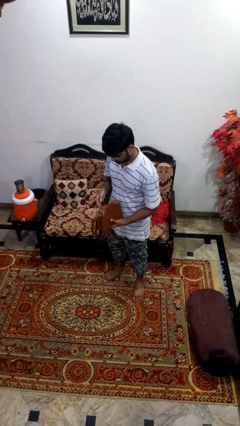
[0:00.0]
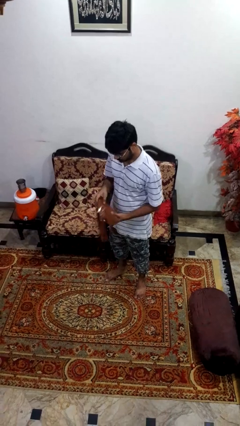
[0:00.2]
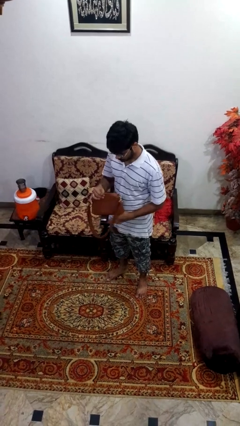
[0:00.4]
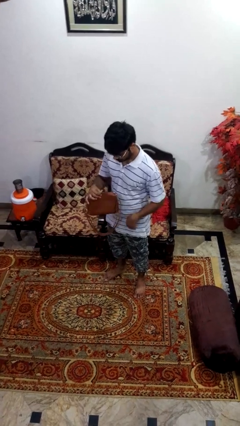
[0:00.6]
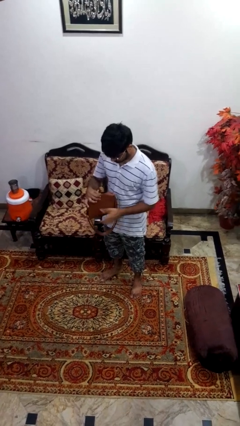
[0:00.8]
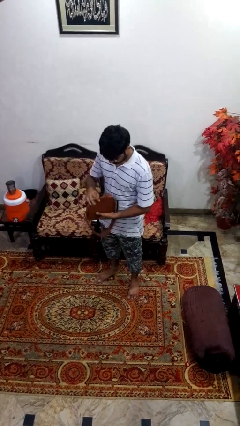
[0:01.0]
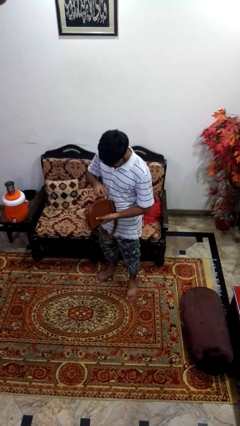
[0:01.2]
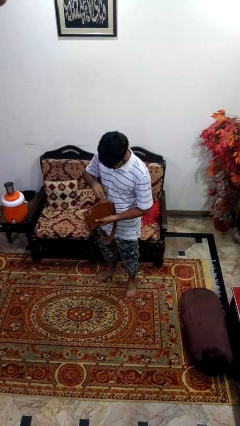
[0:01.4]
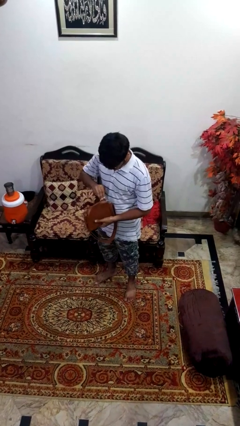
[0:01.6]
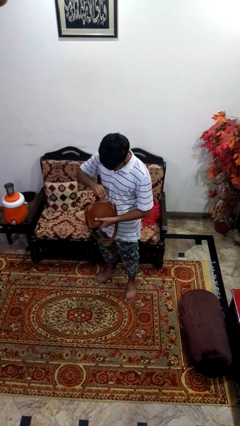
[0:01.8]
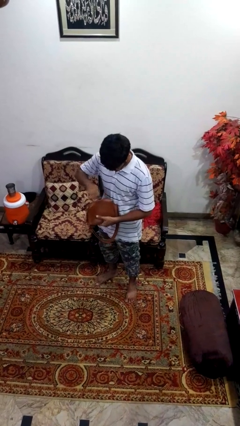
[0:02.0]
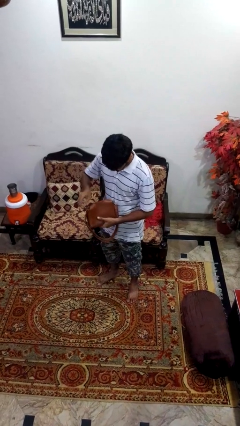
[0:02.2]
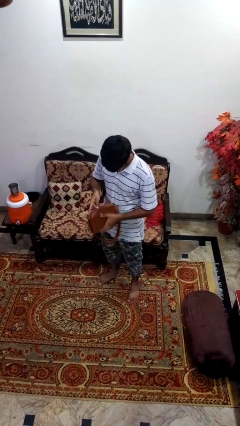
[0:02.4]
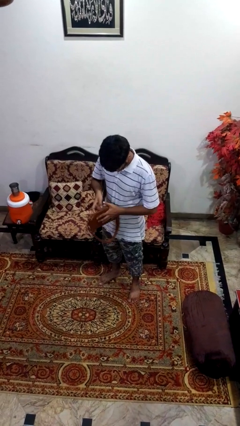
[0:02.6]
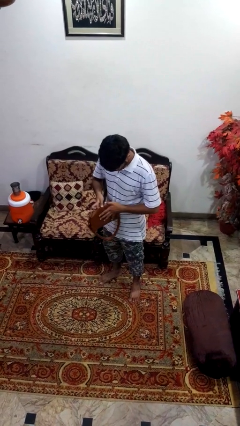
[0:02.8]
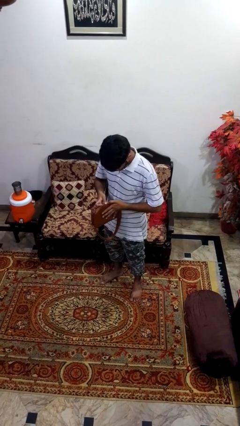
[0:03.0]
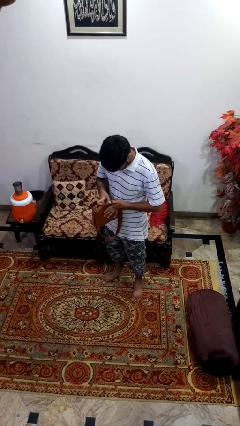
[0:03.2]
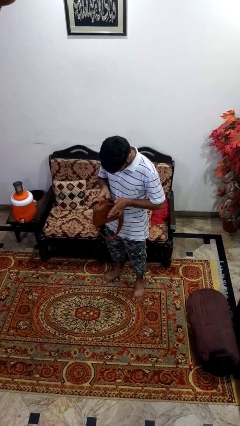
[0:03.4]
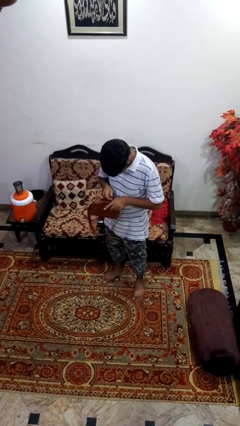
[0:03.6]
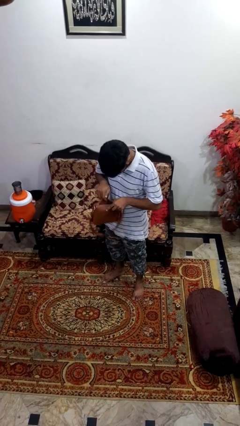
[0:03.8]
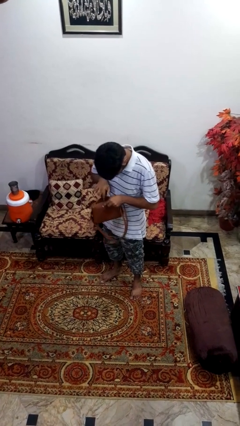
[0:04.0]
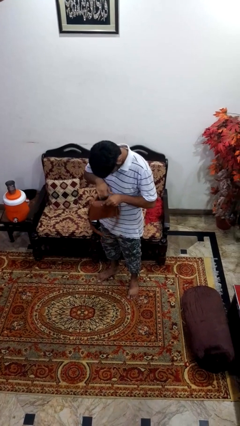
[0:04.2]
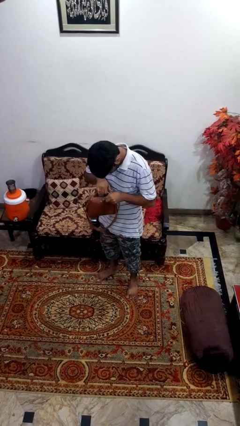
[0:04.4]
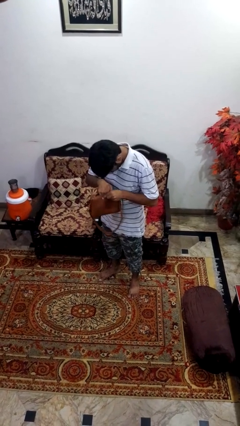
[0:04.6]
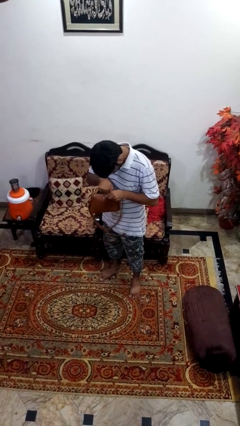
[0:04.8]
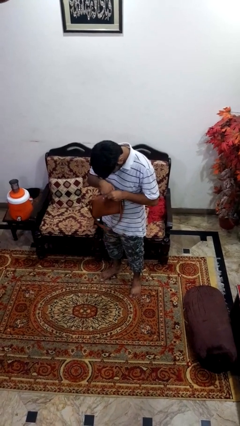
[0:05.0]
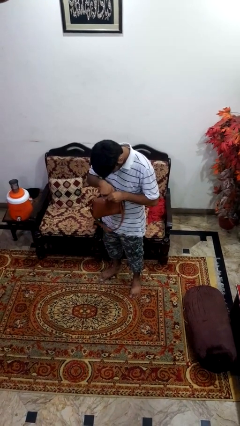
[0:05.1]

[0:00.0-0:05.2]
person searches in purse

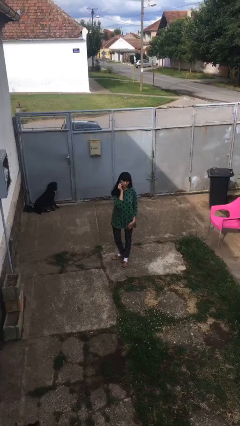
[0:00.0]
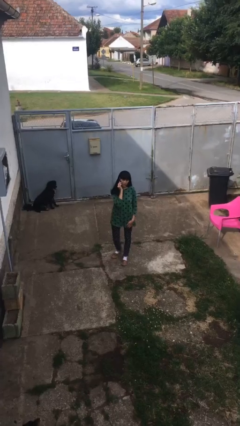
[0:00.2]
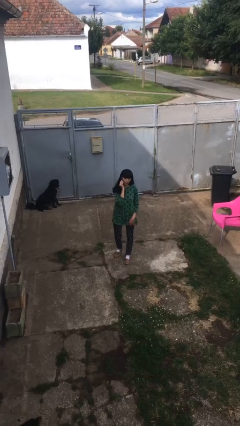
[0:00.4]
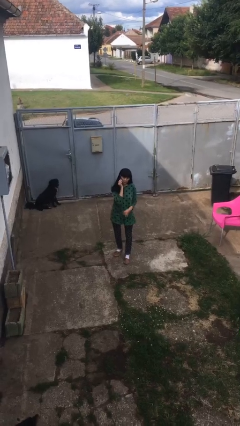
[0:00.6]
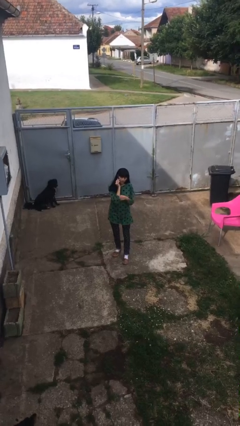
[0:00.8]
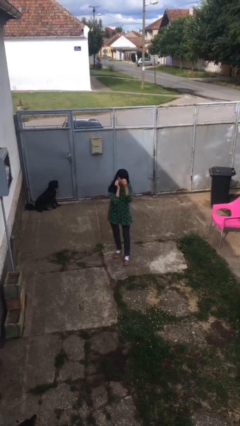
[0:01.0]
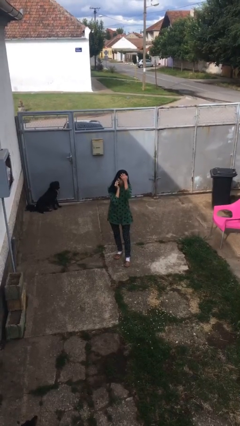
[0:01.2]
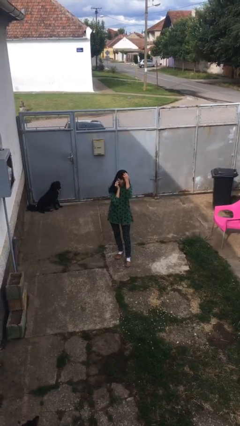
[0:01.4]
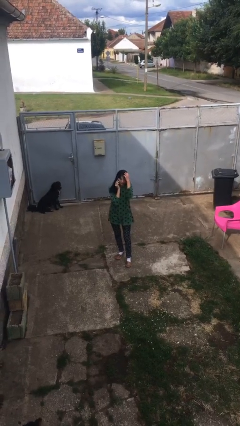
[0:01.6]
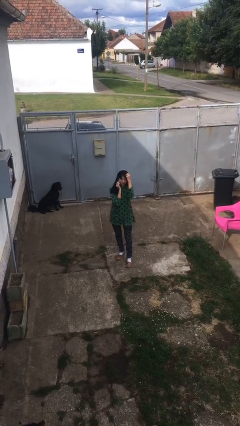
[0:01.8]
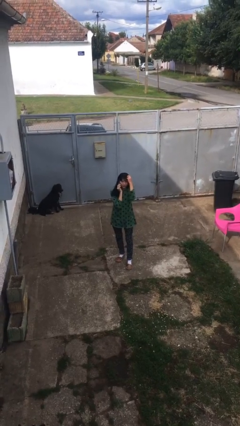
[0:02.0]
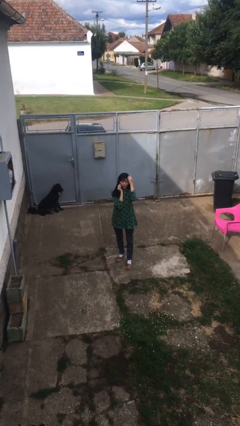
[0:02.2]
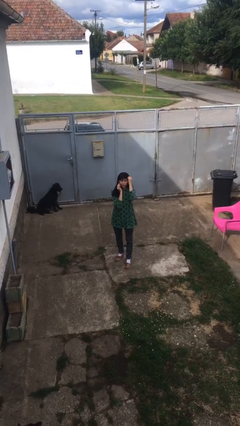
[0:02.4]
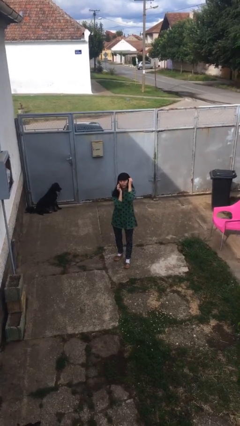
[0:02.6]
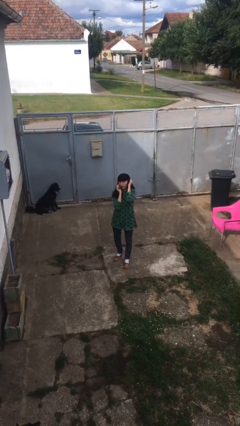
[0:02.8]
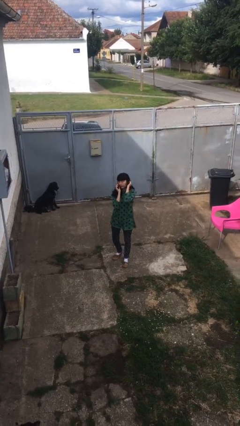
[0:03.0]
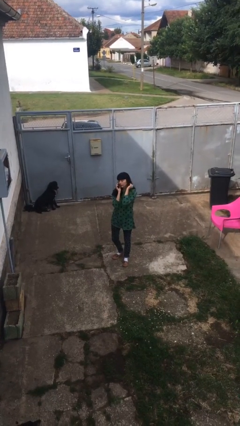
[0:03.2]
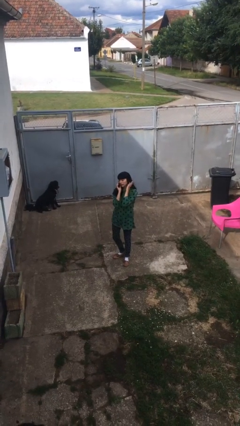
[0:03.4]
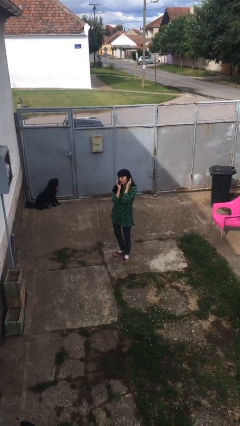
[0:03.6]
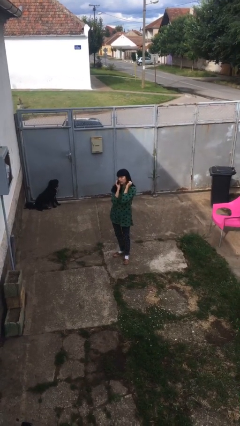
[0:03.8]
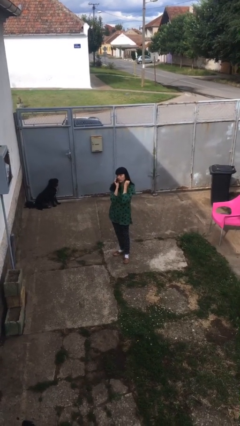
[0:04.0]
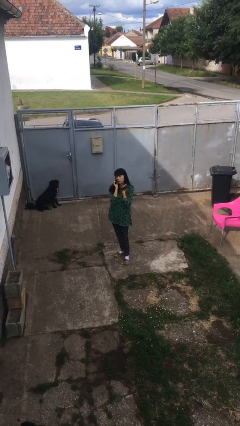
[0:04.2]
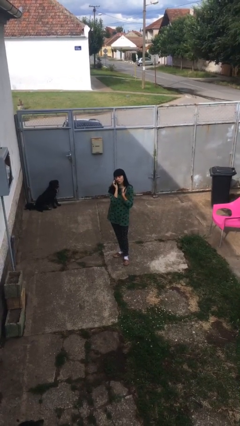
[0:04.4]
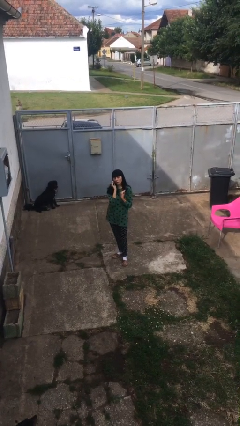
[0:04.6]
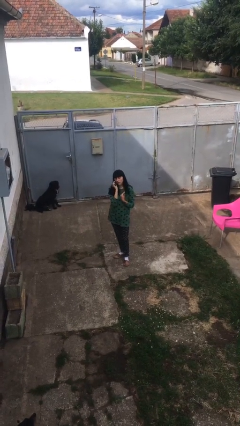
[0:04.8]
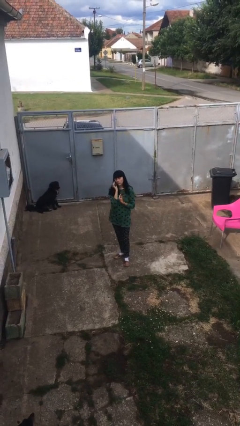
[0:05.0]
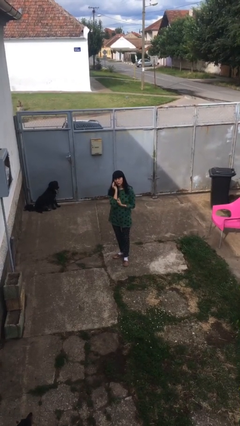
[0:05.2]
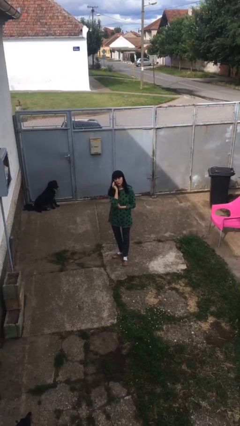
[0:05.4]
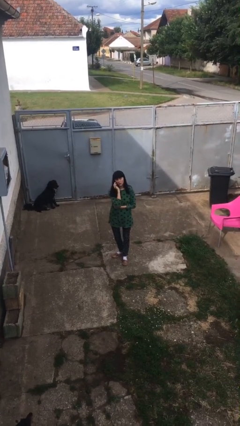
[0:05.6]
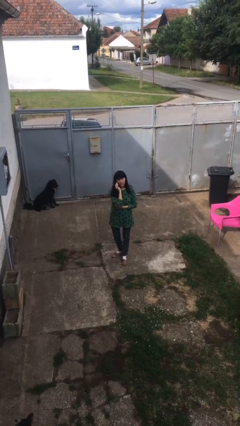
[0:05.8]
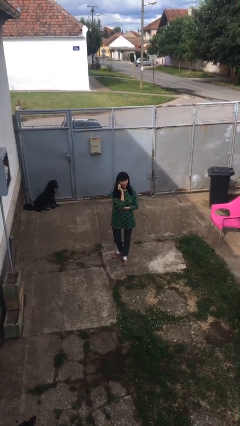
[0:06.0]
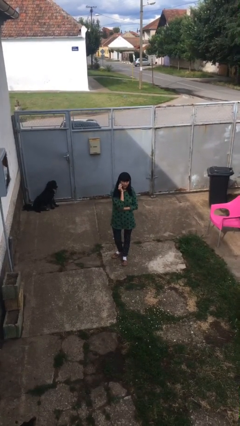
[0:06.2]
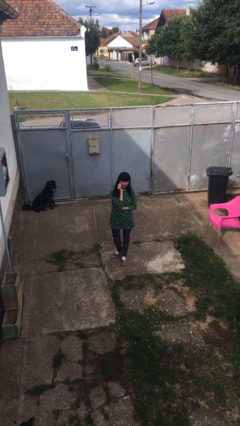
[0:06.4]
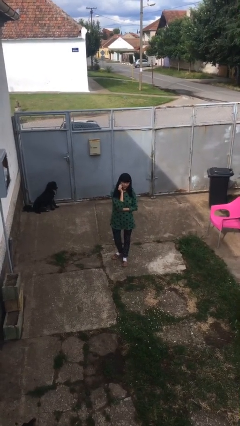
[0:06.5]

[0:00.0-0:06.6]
person talks on phone

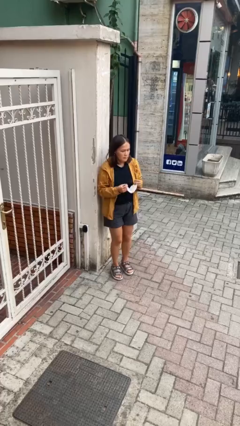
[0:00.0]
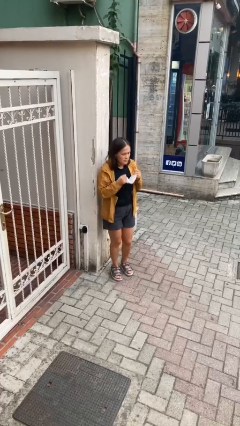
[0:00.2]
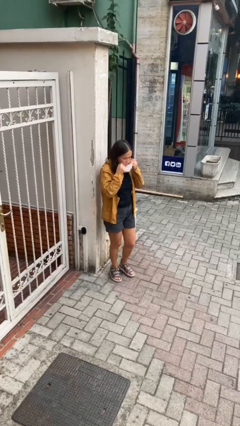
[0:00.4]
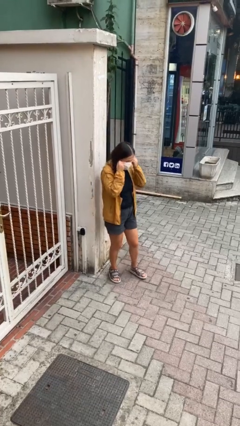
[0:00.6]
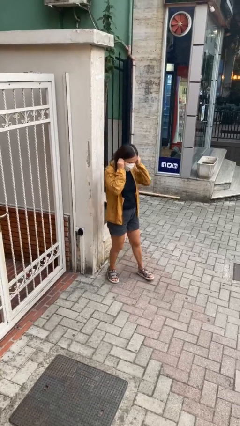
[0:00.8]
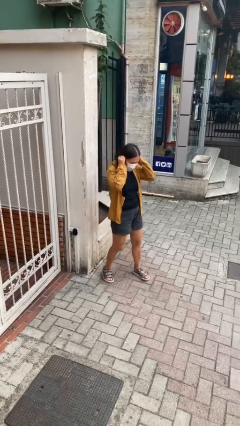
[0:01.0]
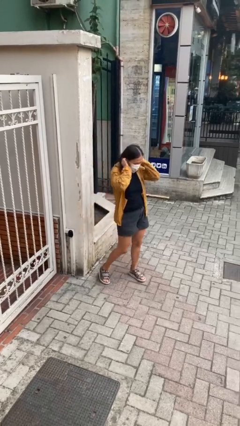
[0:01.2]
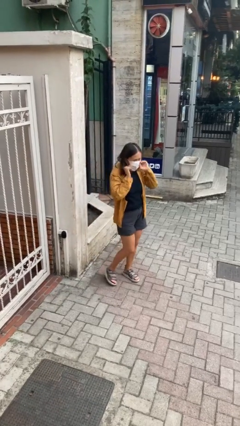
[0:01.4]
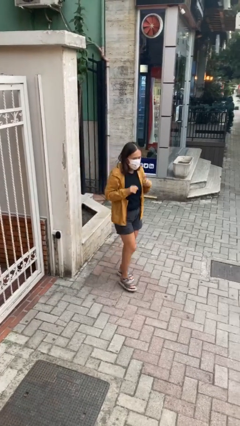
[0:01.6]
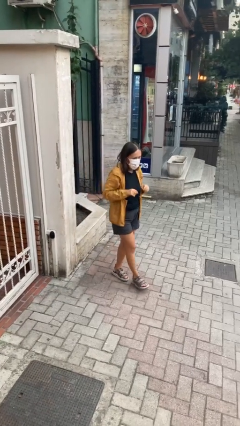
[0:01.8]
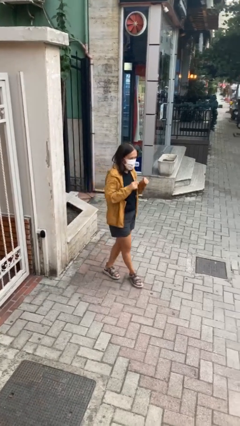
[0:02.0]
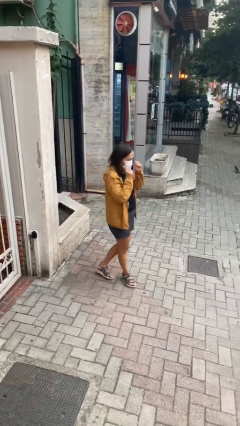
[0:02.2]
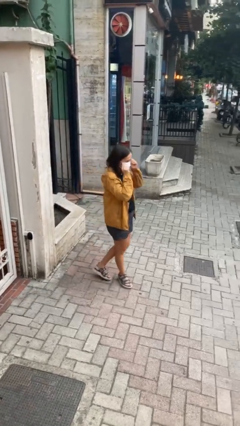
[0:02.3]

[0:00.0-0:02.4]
person puts on facemask

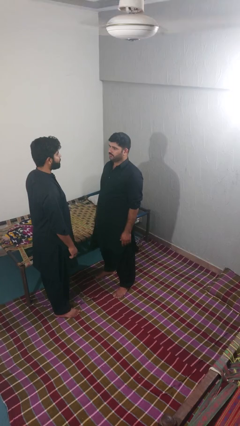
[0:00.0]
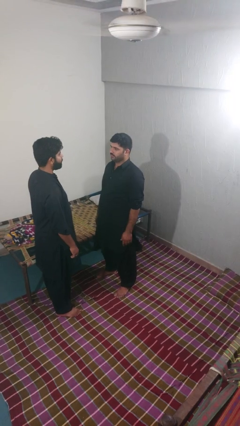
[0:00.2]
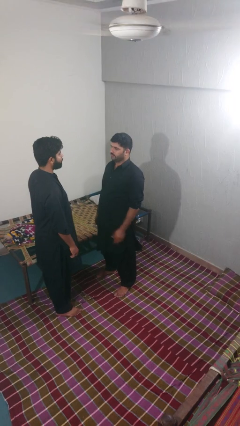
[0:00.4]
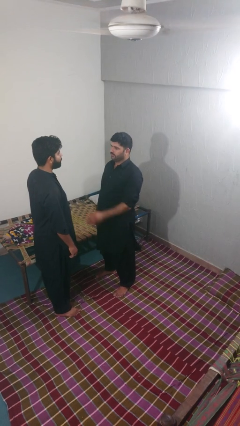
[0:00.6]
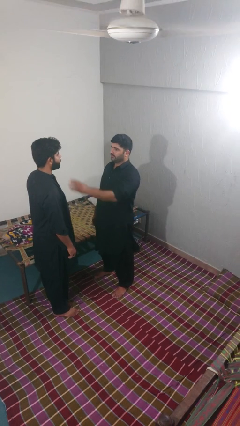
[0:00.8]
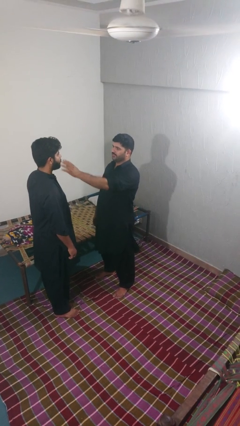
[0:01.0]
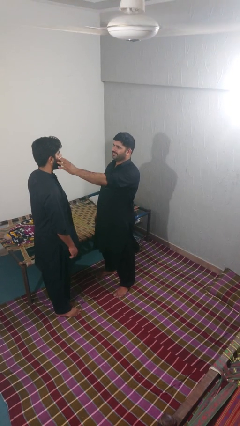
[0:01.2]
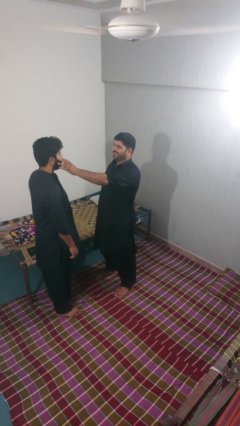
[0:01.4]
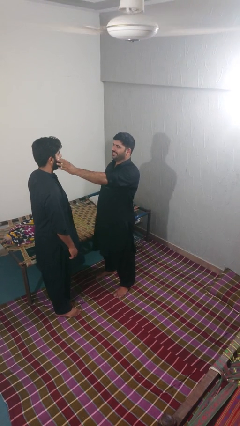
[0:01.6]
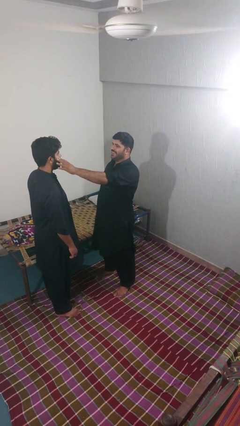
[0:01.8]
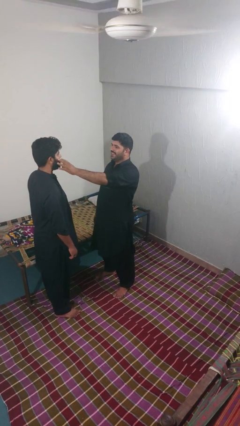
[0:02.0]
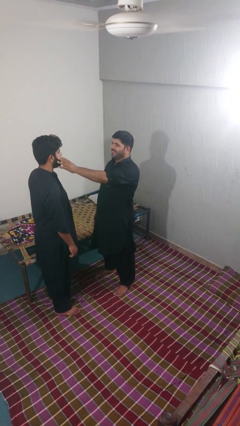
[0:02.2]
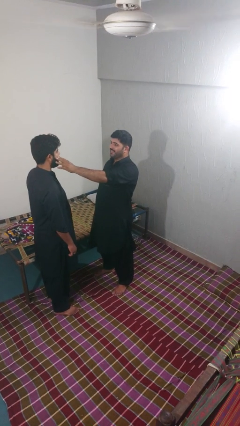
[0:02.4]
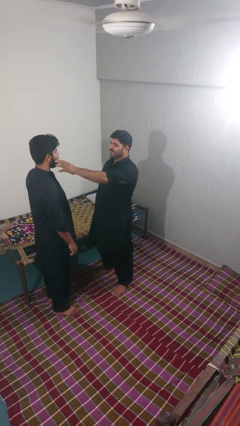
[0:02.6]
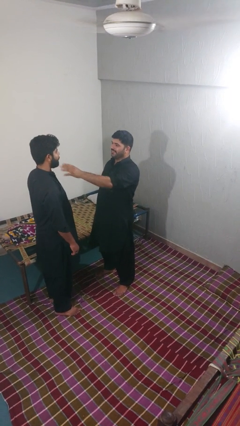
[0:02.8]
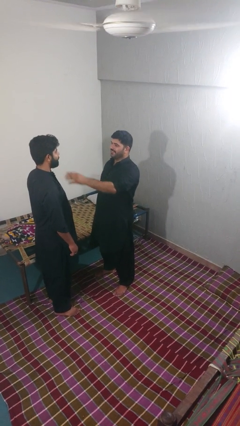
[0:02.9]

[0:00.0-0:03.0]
person touches face of person

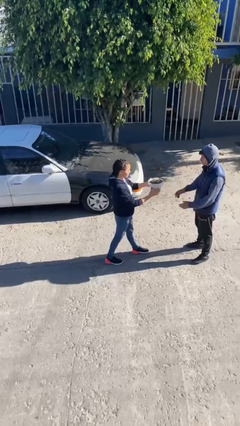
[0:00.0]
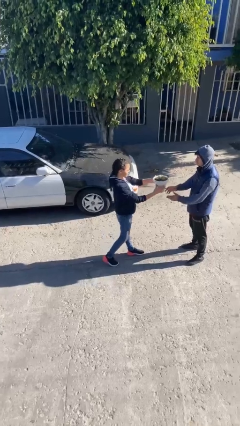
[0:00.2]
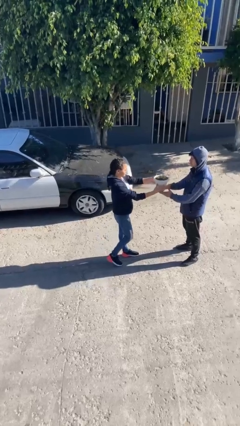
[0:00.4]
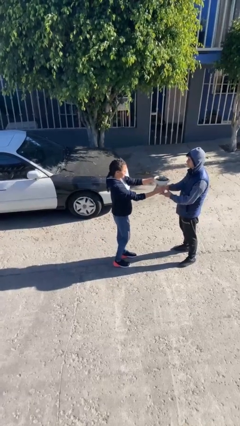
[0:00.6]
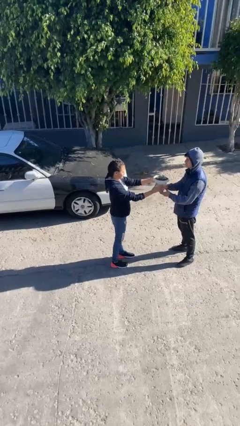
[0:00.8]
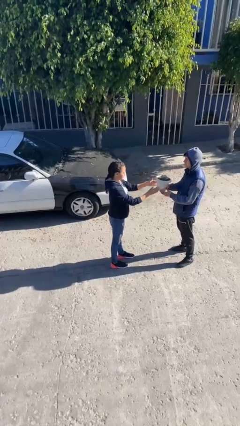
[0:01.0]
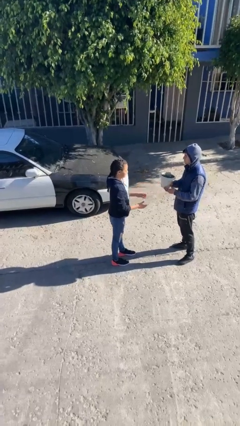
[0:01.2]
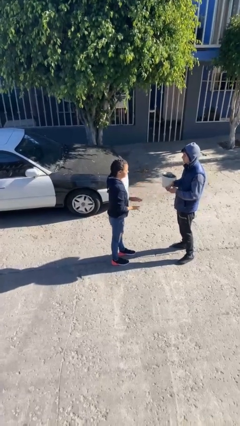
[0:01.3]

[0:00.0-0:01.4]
person transfers object to person
